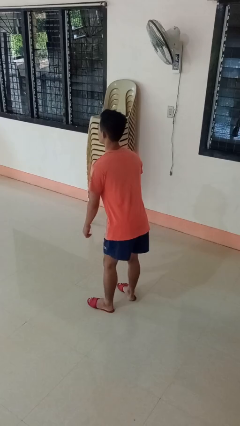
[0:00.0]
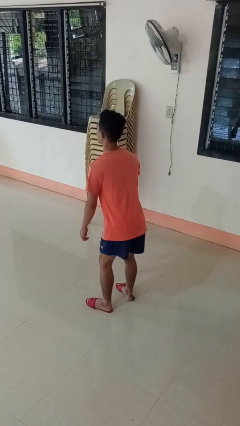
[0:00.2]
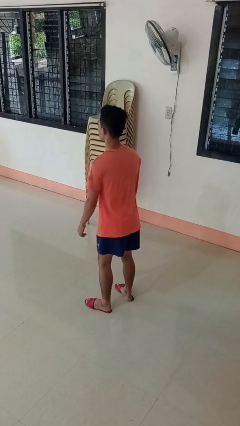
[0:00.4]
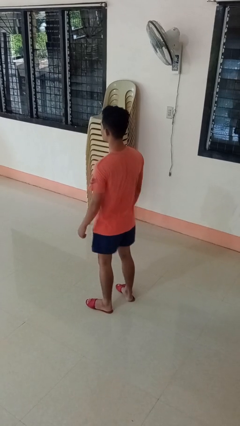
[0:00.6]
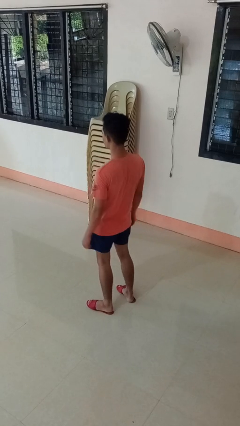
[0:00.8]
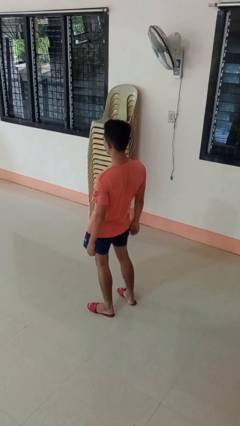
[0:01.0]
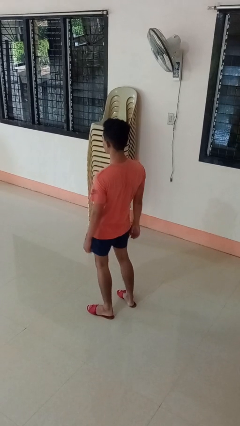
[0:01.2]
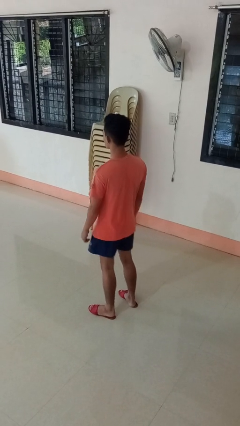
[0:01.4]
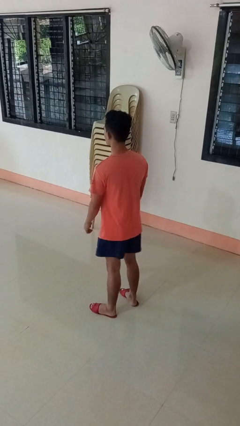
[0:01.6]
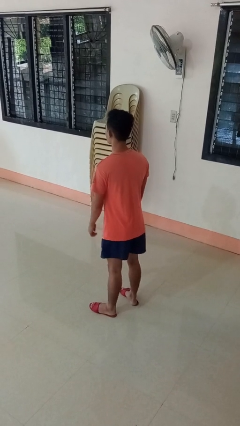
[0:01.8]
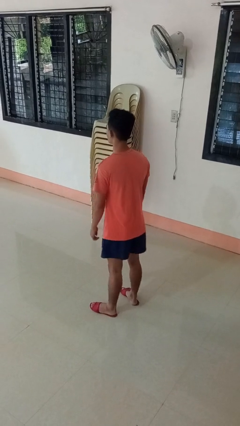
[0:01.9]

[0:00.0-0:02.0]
person wiggles hips

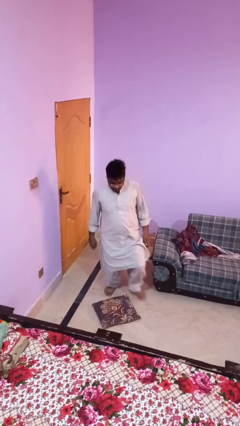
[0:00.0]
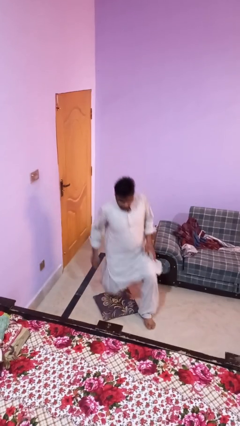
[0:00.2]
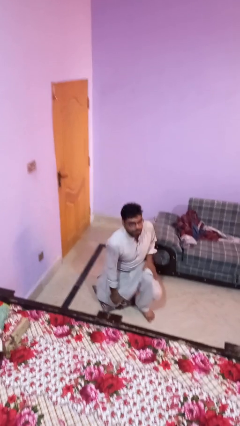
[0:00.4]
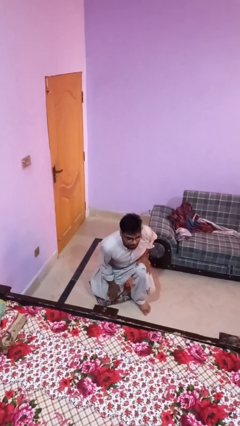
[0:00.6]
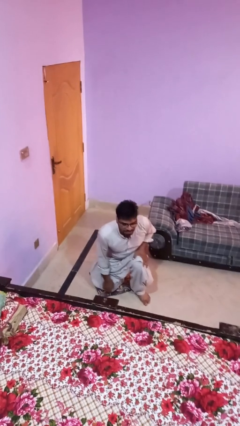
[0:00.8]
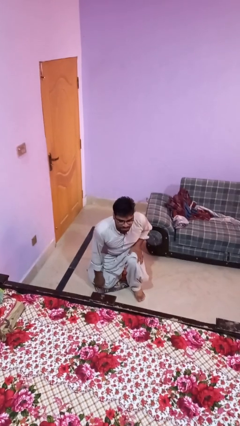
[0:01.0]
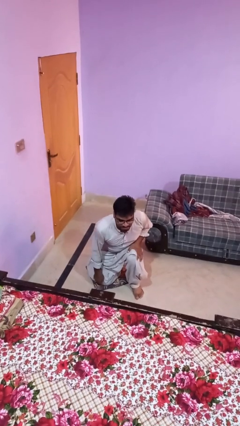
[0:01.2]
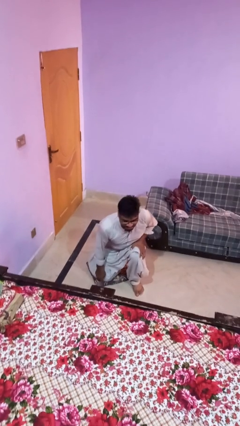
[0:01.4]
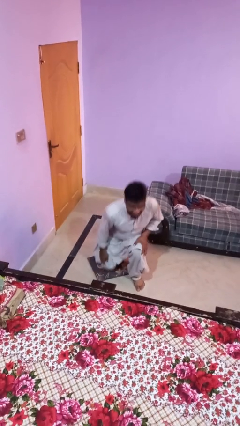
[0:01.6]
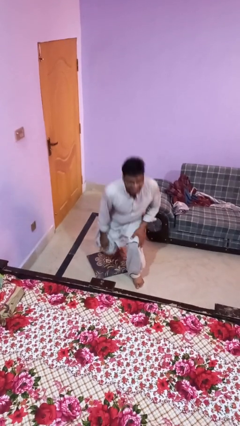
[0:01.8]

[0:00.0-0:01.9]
person trips on object on floor

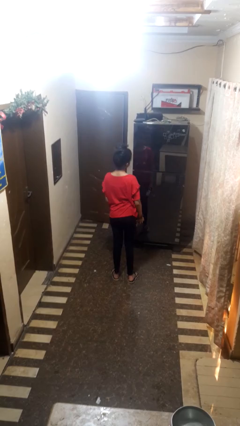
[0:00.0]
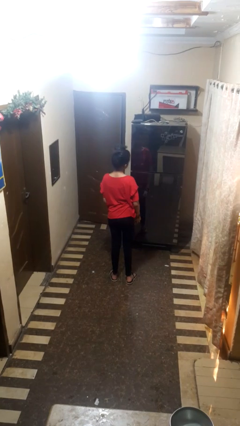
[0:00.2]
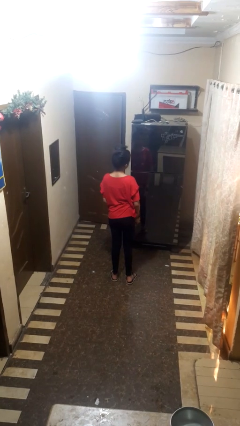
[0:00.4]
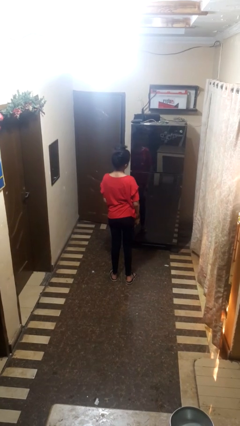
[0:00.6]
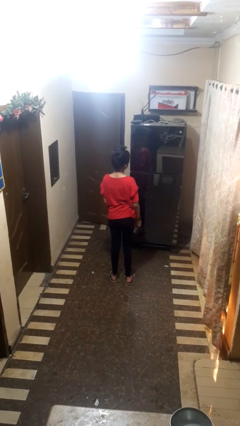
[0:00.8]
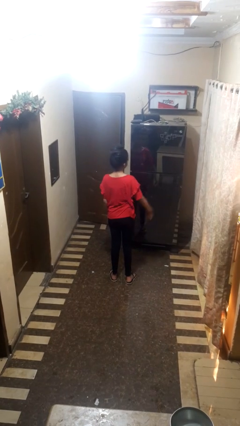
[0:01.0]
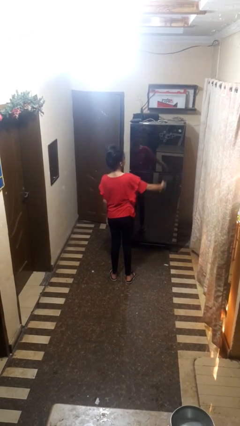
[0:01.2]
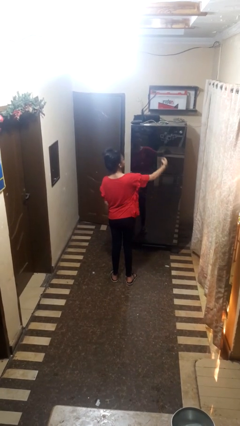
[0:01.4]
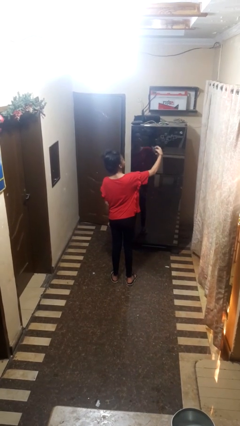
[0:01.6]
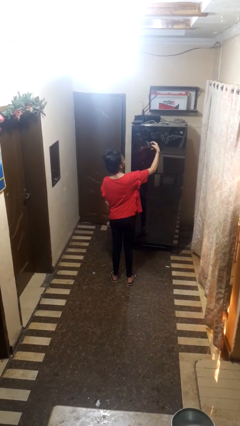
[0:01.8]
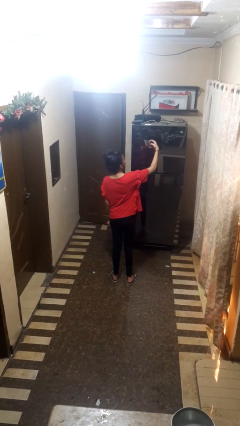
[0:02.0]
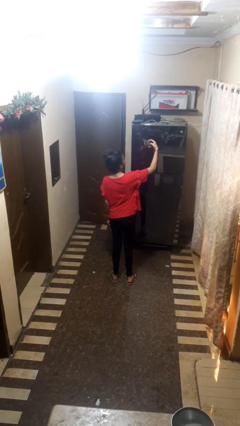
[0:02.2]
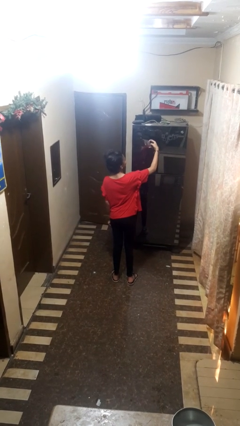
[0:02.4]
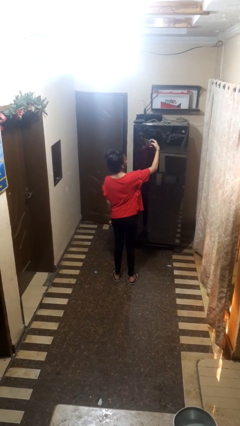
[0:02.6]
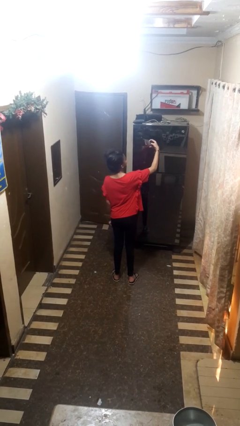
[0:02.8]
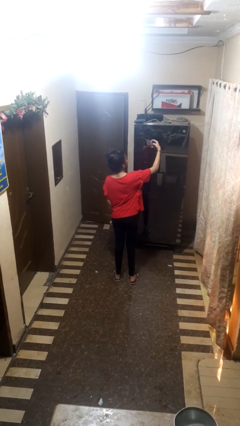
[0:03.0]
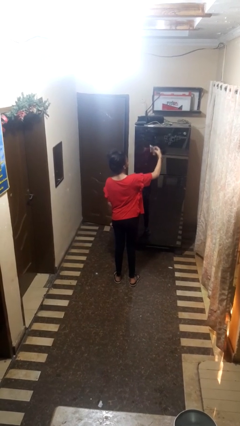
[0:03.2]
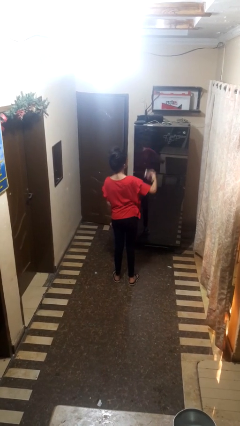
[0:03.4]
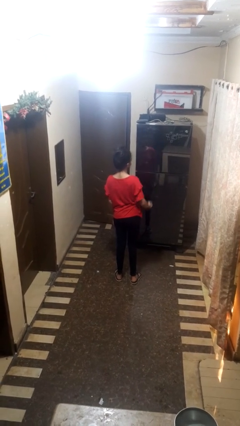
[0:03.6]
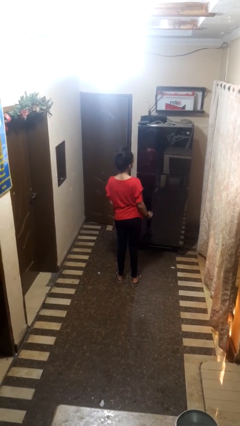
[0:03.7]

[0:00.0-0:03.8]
person takes selfie

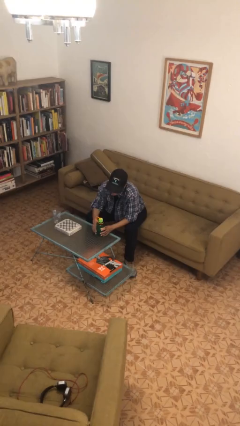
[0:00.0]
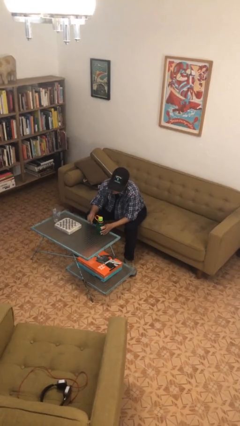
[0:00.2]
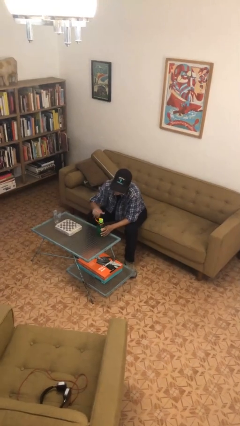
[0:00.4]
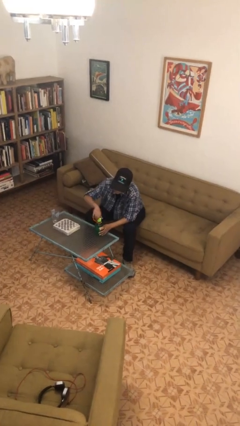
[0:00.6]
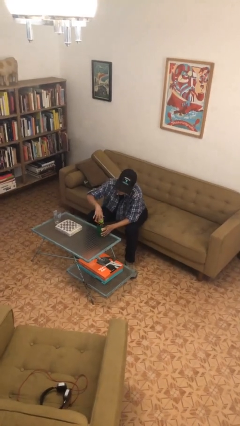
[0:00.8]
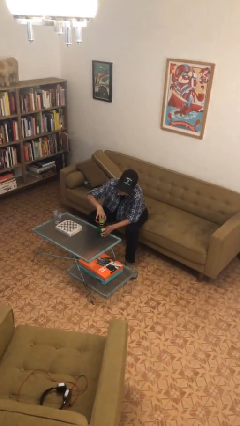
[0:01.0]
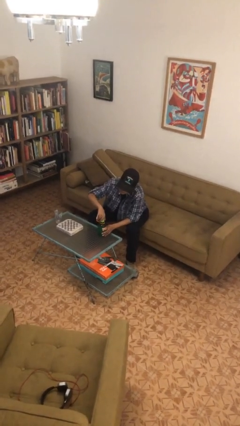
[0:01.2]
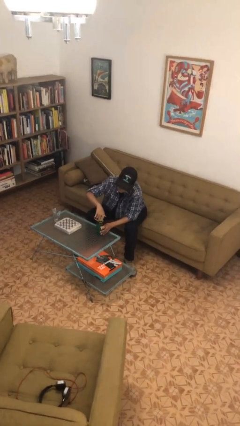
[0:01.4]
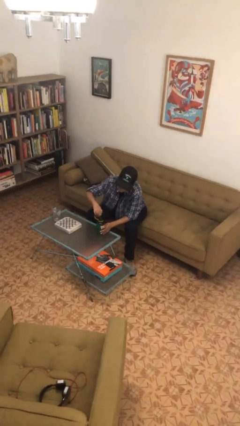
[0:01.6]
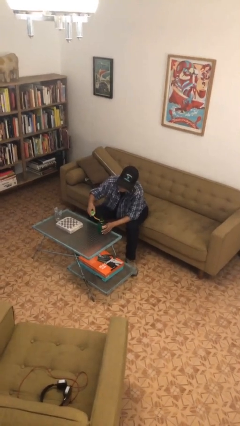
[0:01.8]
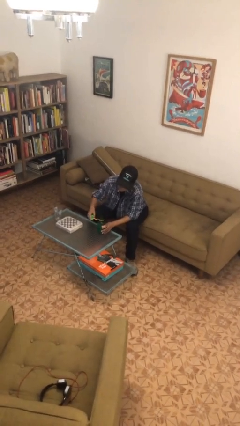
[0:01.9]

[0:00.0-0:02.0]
person unscrews lid from bottle

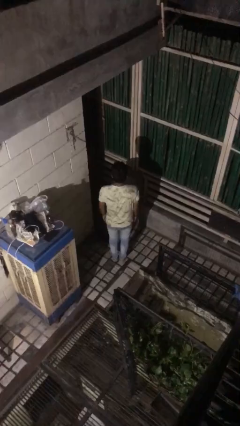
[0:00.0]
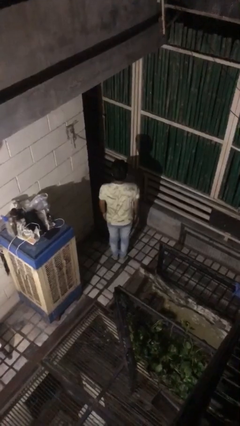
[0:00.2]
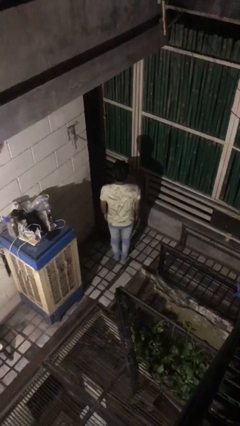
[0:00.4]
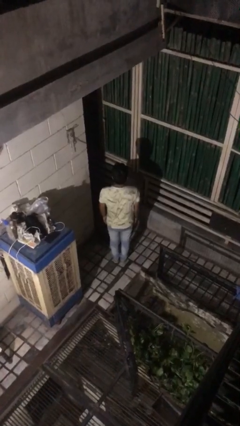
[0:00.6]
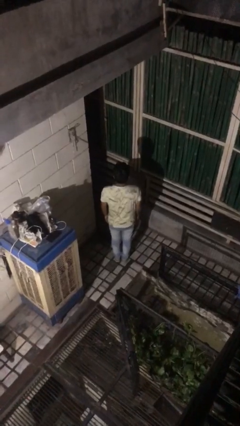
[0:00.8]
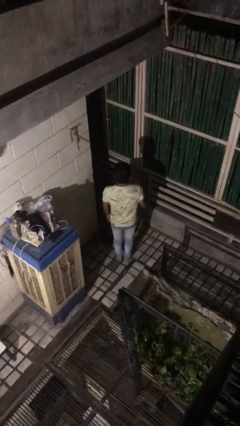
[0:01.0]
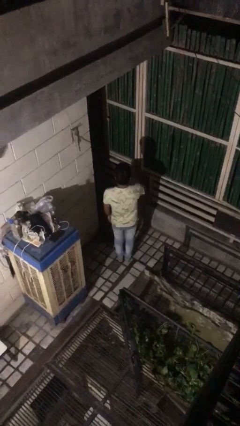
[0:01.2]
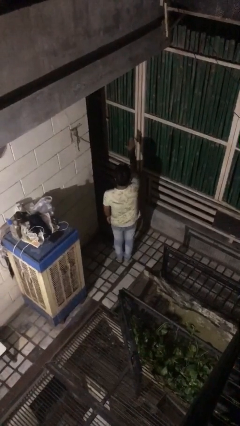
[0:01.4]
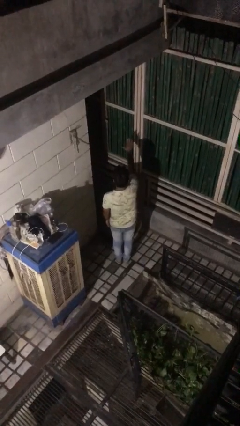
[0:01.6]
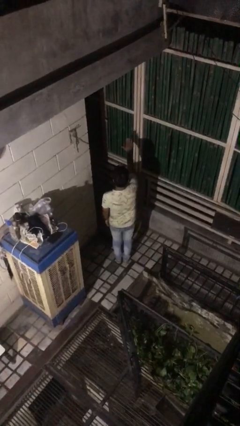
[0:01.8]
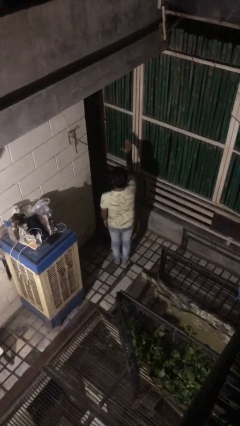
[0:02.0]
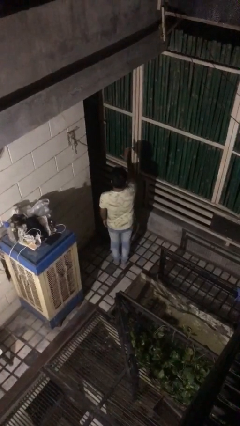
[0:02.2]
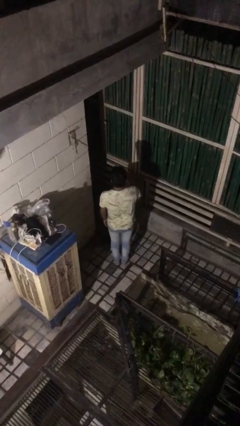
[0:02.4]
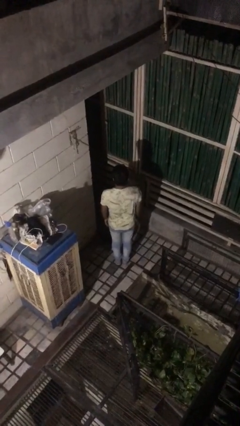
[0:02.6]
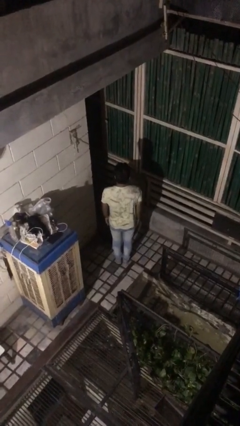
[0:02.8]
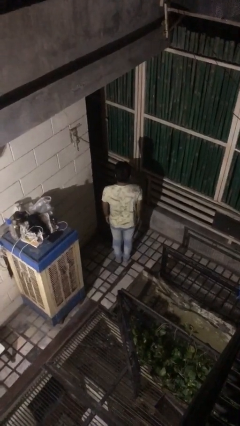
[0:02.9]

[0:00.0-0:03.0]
person gestures stop

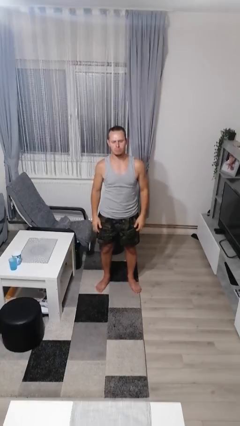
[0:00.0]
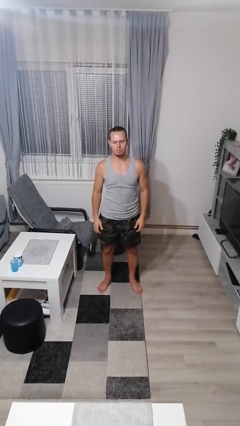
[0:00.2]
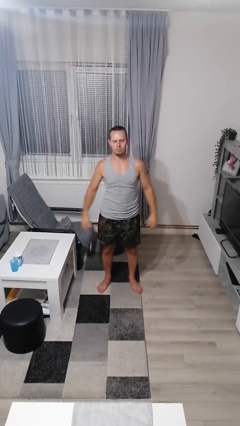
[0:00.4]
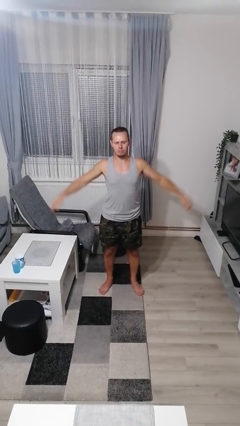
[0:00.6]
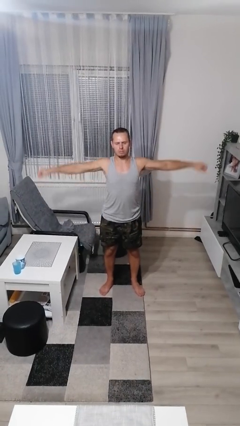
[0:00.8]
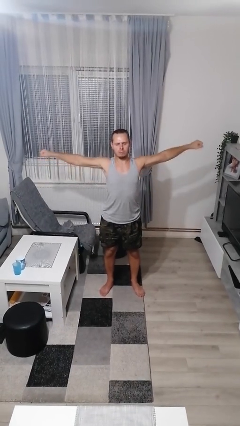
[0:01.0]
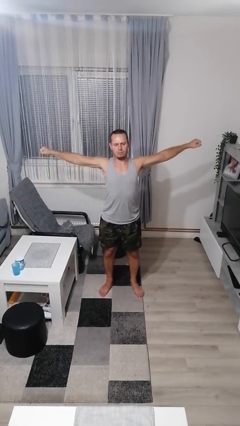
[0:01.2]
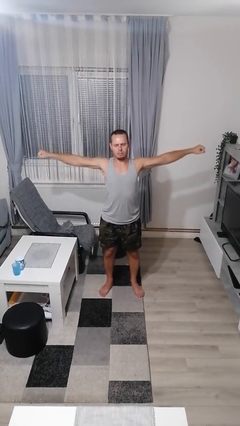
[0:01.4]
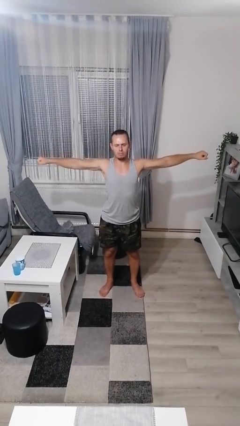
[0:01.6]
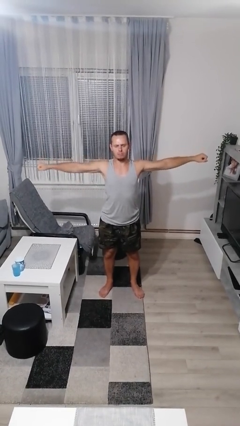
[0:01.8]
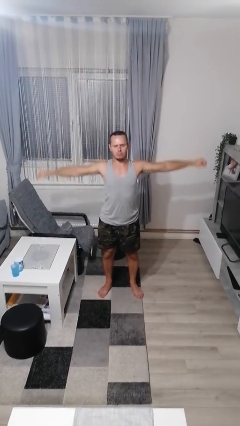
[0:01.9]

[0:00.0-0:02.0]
person stretches arms to side

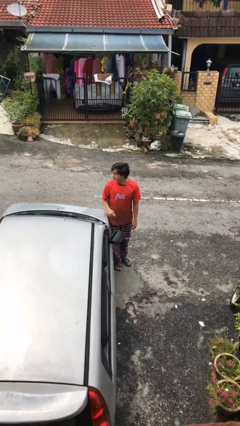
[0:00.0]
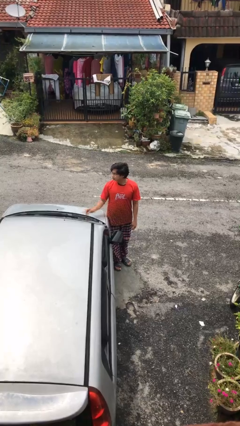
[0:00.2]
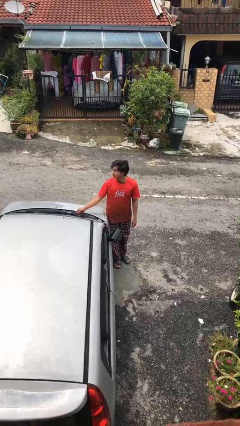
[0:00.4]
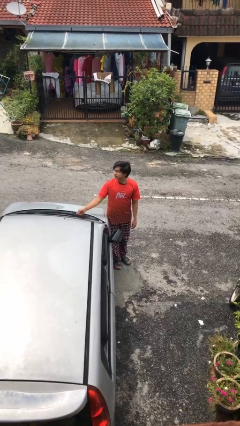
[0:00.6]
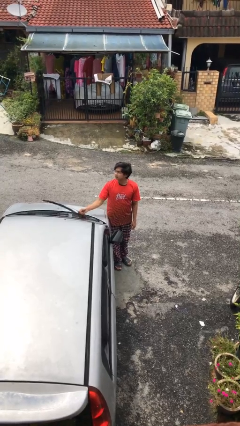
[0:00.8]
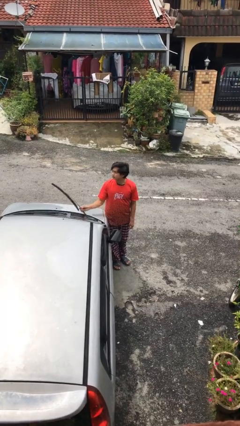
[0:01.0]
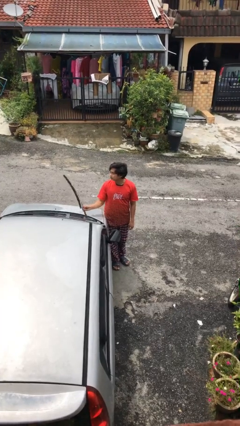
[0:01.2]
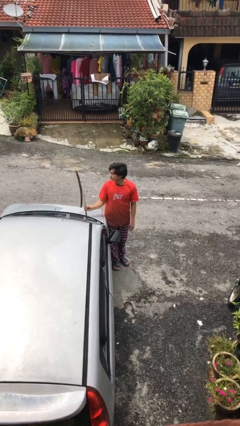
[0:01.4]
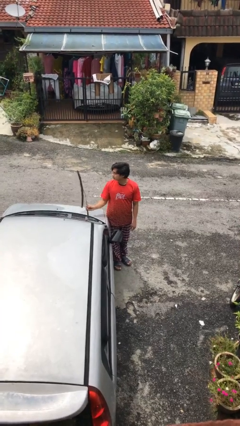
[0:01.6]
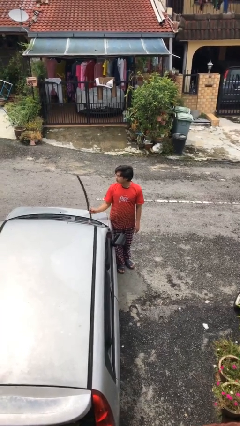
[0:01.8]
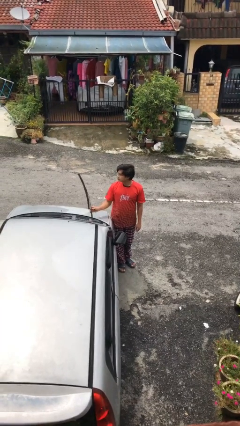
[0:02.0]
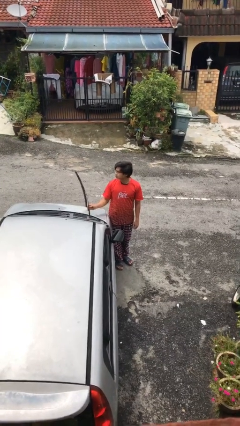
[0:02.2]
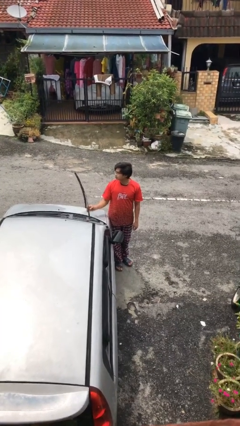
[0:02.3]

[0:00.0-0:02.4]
person flips up car wipers
